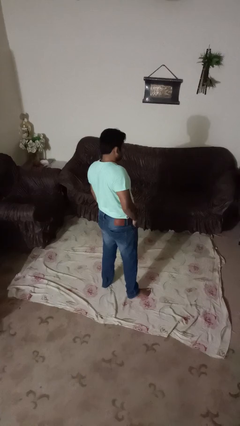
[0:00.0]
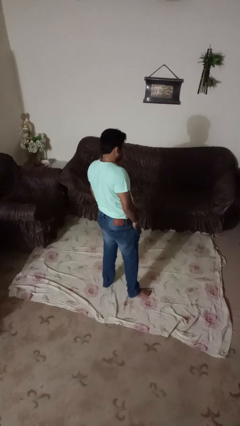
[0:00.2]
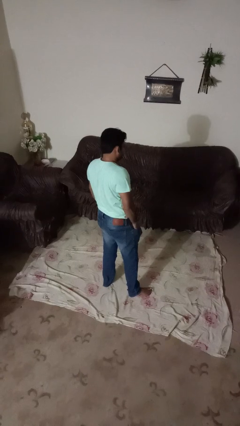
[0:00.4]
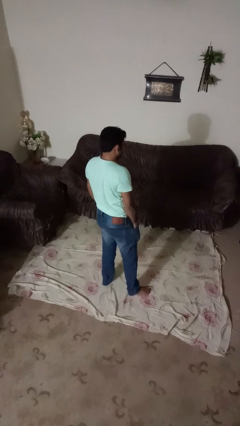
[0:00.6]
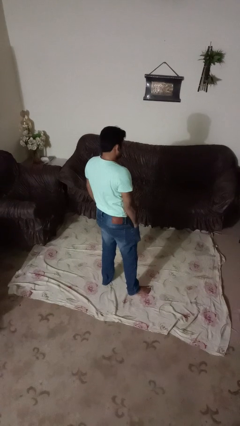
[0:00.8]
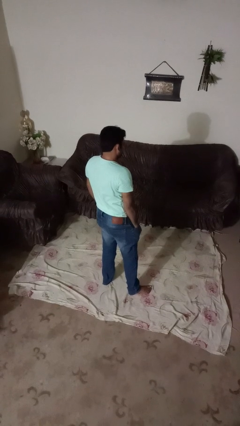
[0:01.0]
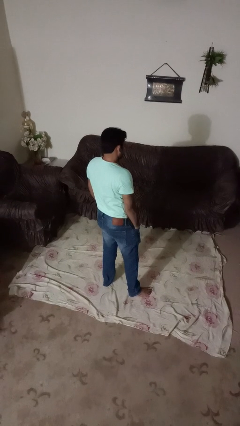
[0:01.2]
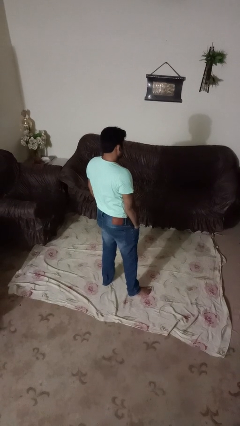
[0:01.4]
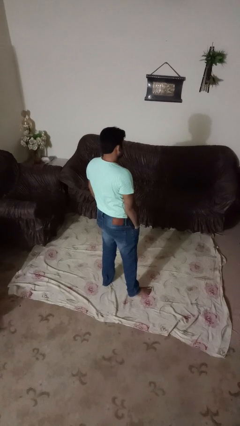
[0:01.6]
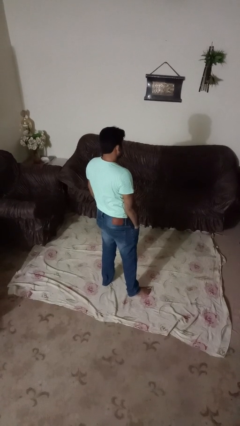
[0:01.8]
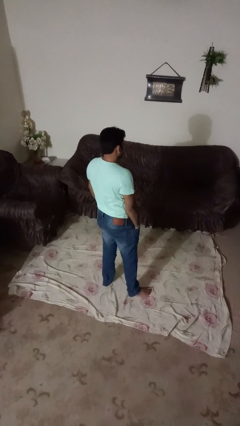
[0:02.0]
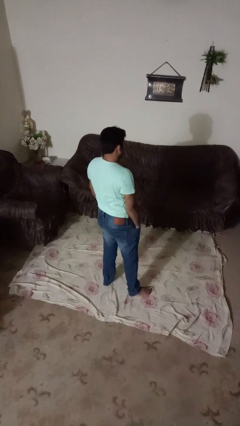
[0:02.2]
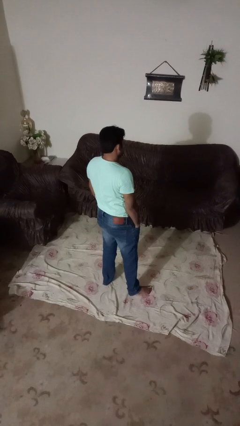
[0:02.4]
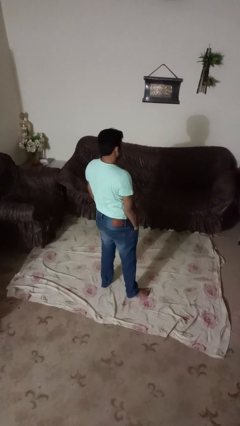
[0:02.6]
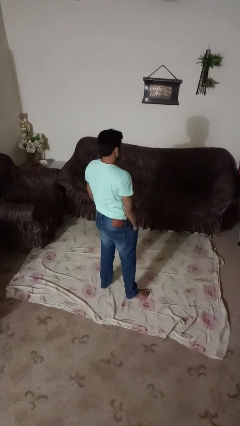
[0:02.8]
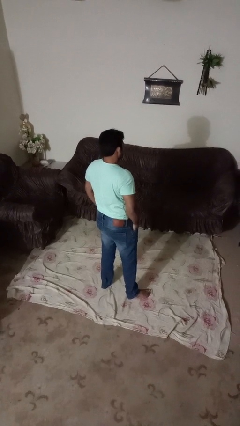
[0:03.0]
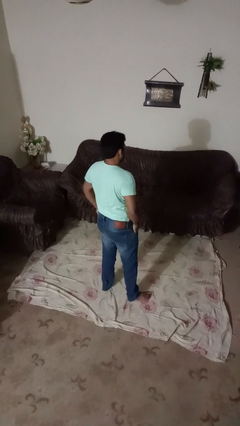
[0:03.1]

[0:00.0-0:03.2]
person puts hands in back pockets

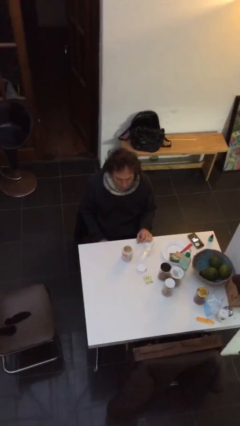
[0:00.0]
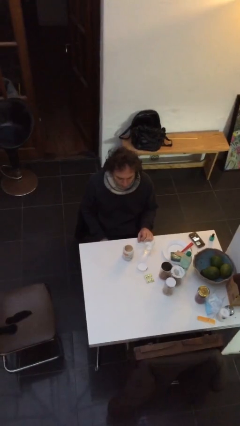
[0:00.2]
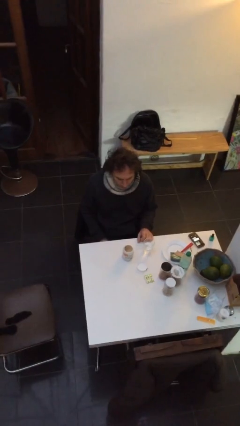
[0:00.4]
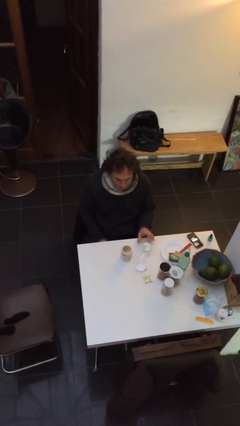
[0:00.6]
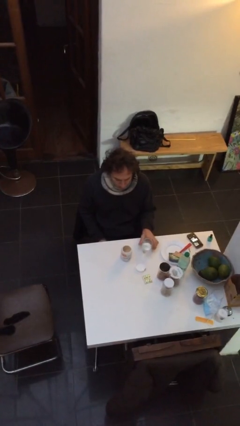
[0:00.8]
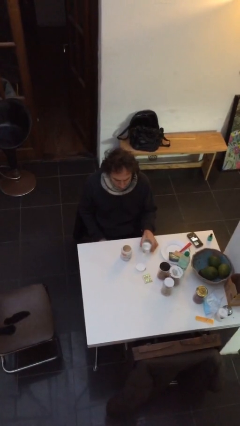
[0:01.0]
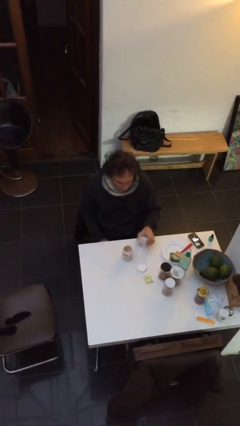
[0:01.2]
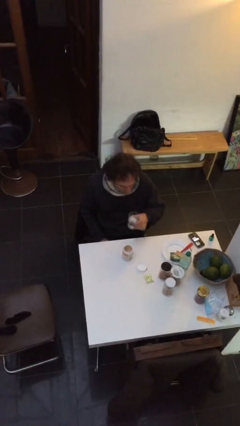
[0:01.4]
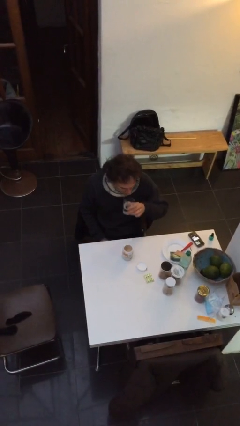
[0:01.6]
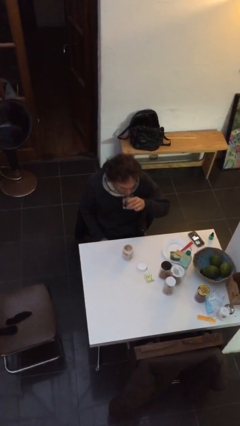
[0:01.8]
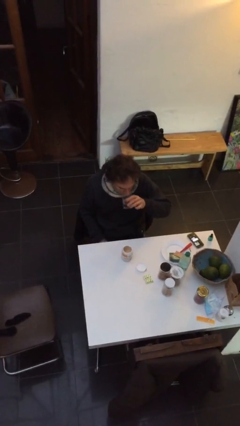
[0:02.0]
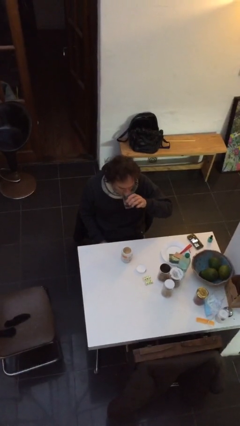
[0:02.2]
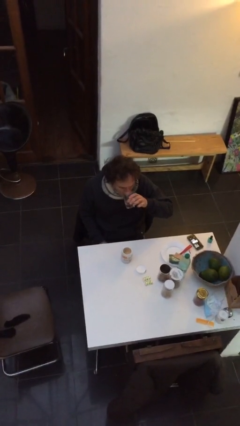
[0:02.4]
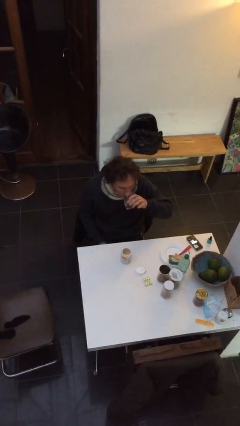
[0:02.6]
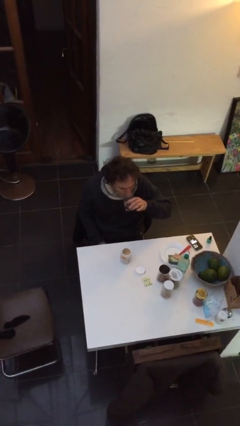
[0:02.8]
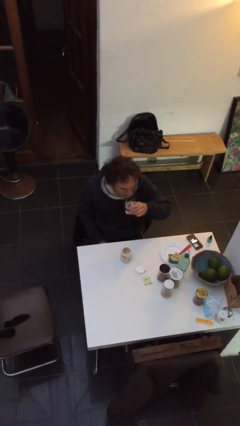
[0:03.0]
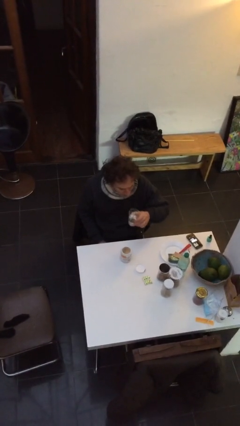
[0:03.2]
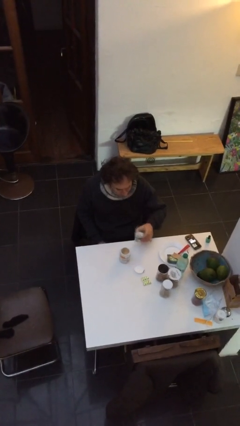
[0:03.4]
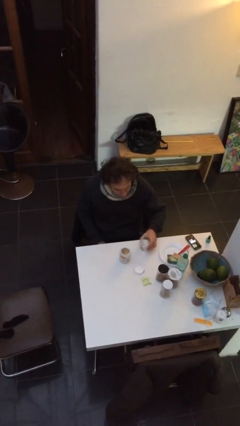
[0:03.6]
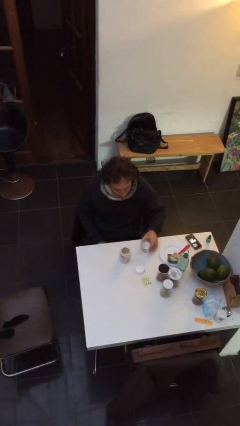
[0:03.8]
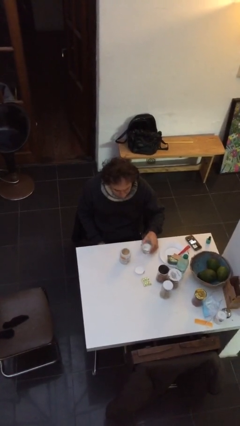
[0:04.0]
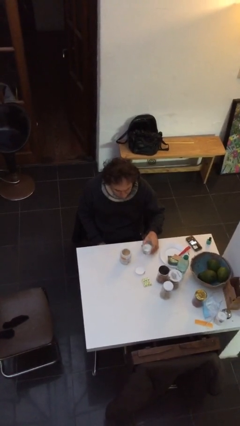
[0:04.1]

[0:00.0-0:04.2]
person drinks from cup

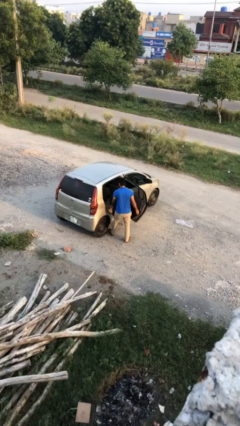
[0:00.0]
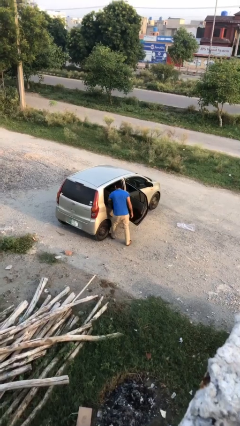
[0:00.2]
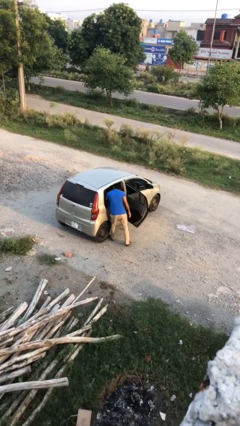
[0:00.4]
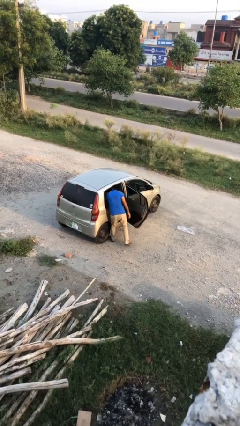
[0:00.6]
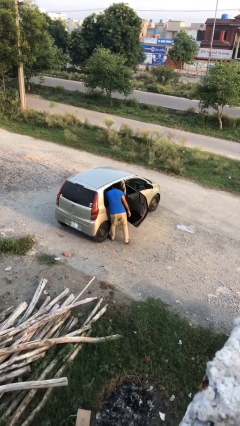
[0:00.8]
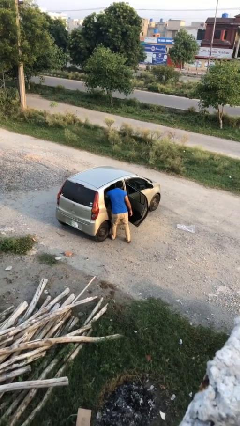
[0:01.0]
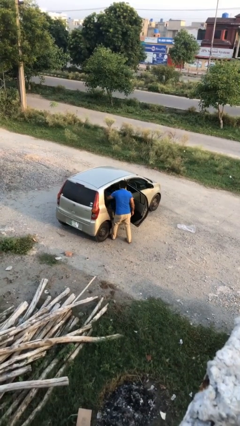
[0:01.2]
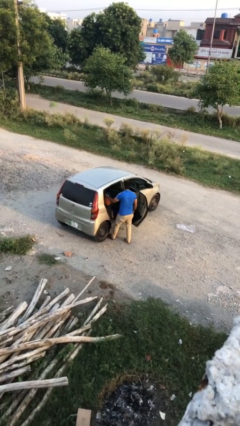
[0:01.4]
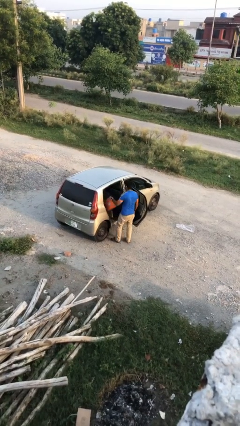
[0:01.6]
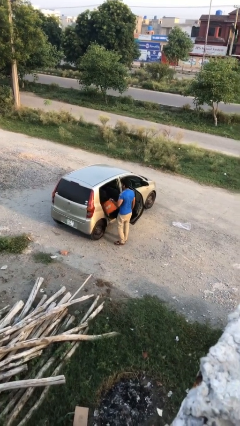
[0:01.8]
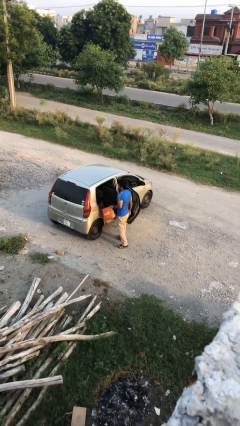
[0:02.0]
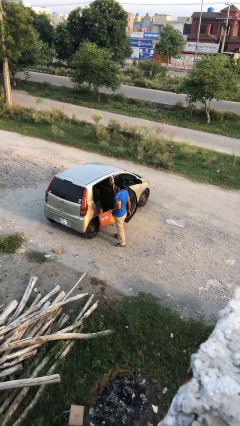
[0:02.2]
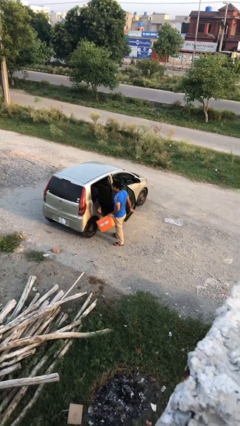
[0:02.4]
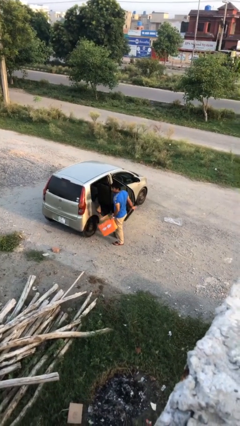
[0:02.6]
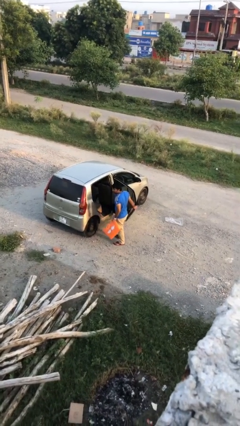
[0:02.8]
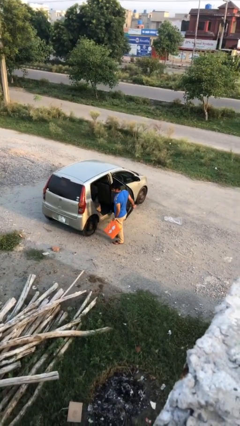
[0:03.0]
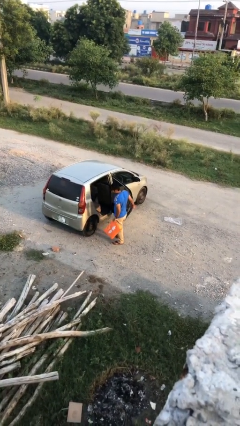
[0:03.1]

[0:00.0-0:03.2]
person unloads car

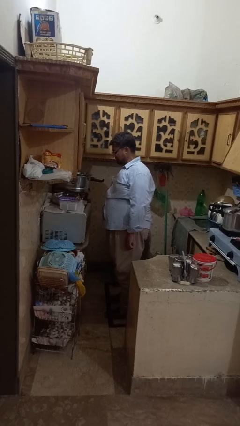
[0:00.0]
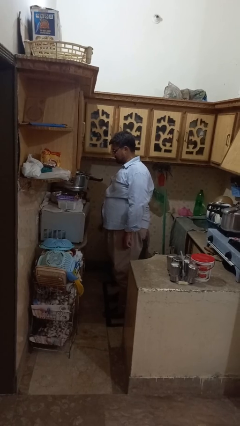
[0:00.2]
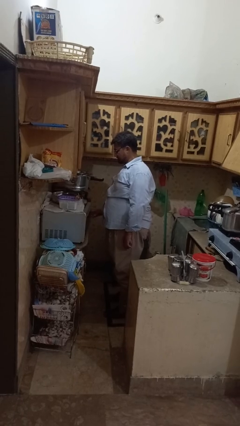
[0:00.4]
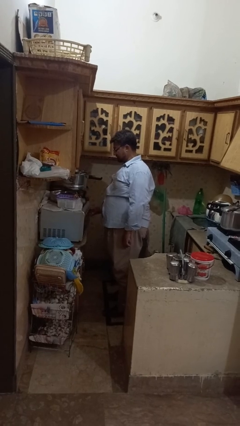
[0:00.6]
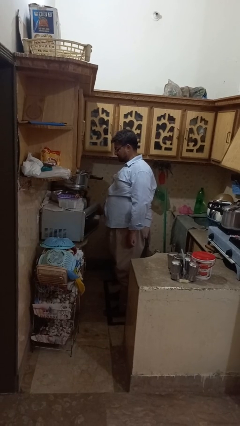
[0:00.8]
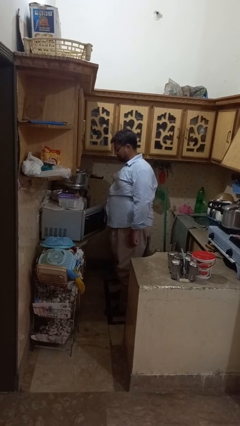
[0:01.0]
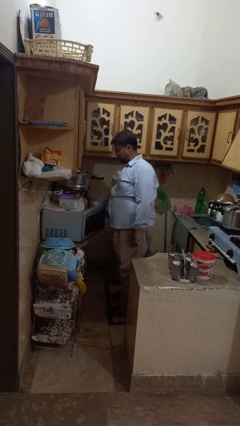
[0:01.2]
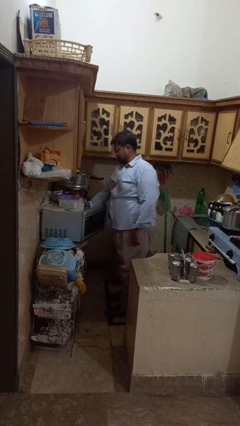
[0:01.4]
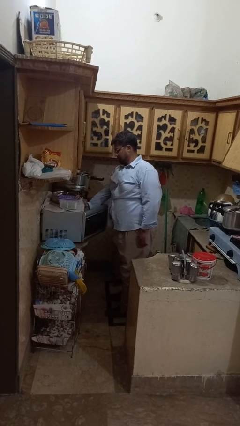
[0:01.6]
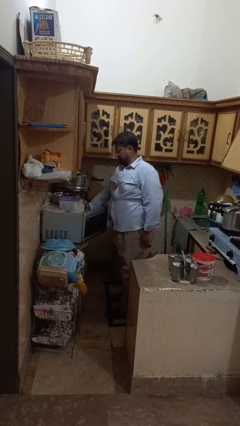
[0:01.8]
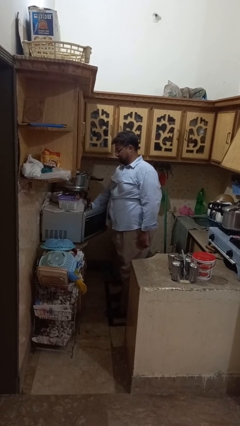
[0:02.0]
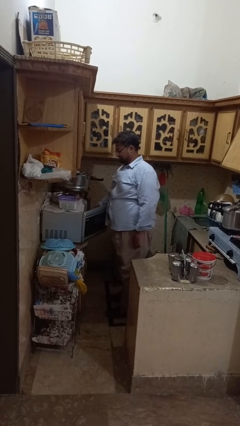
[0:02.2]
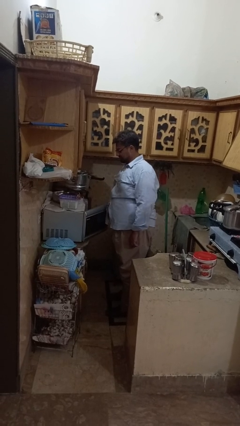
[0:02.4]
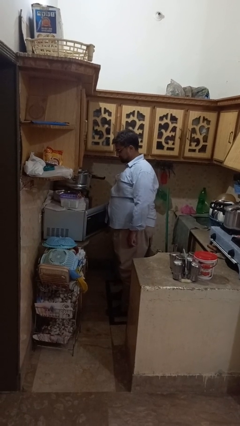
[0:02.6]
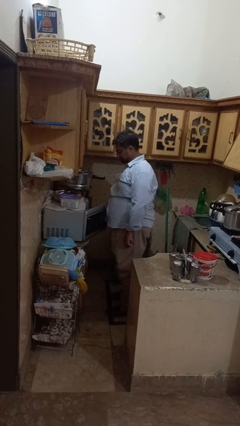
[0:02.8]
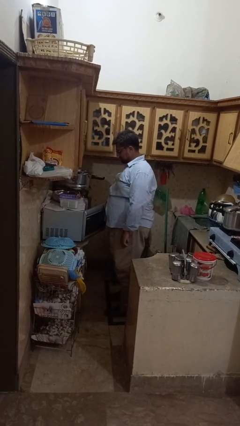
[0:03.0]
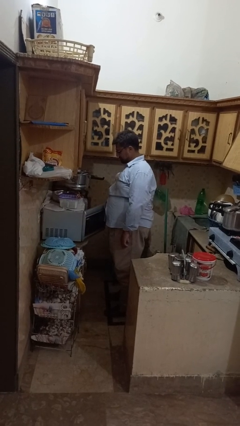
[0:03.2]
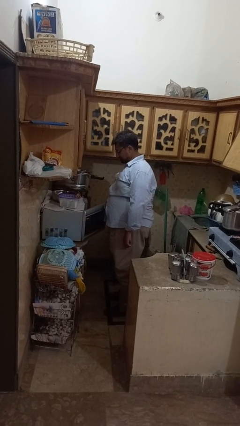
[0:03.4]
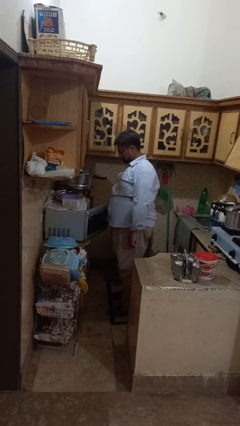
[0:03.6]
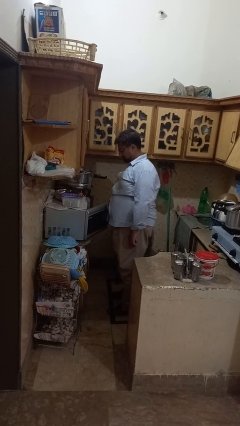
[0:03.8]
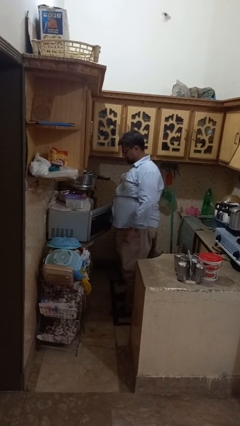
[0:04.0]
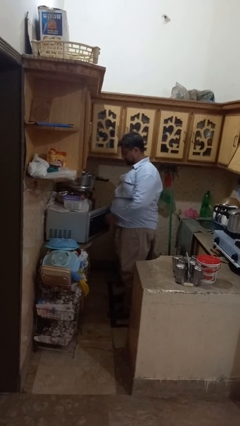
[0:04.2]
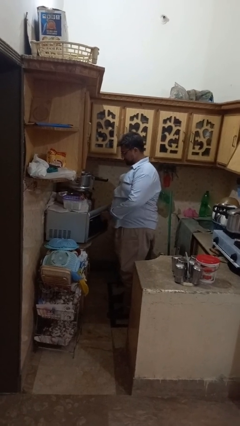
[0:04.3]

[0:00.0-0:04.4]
person takes object from microwave

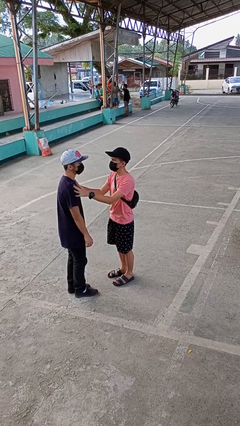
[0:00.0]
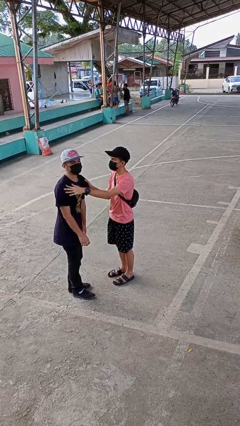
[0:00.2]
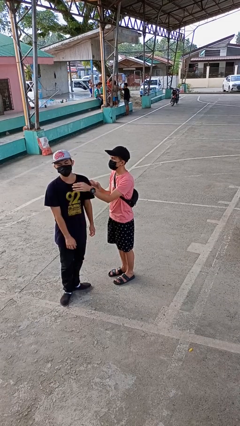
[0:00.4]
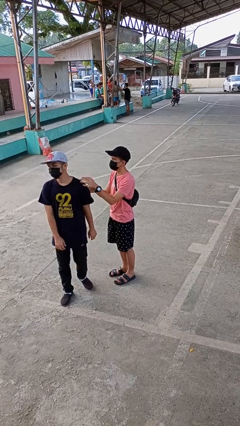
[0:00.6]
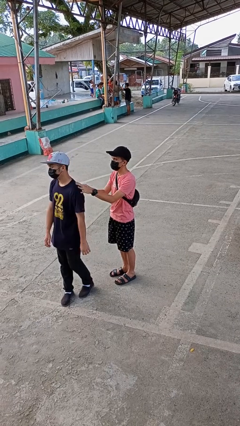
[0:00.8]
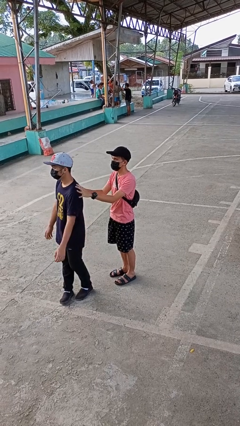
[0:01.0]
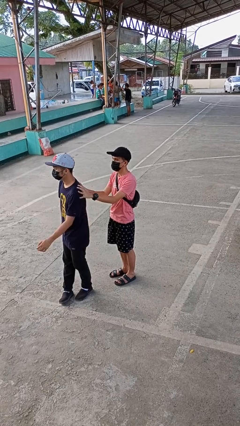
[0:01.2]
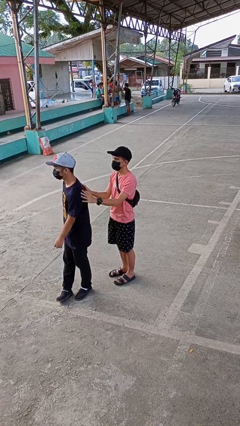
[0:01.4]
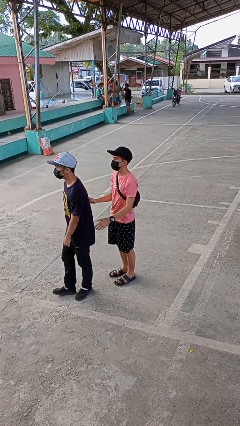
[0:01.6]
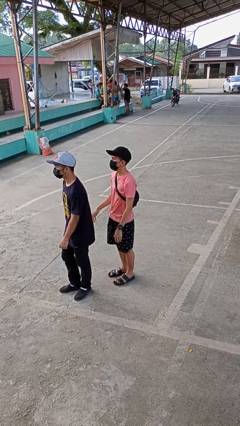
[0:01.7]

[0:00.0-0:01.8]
person spins person around

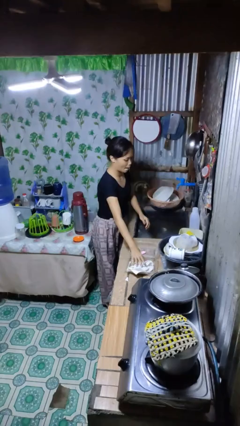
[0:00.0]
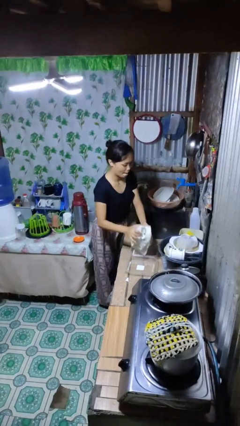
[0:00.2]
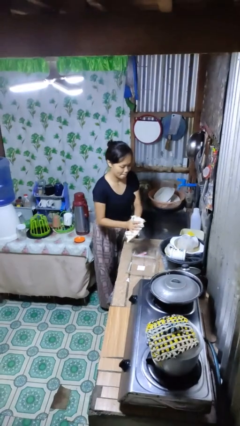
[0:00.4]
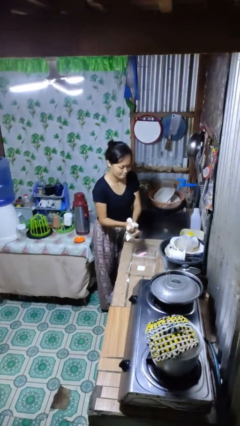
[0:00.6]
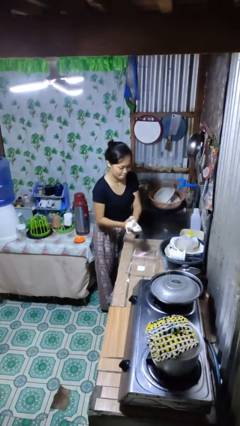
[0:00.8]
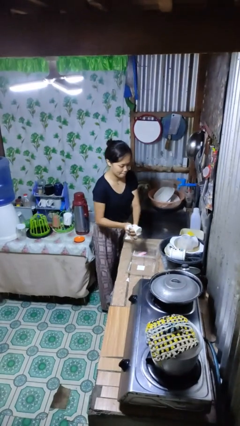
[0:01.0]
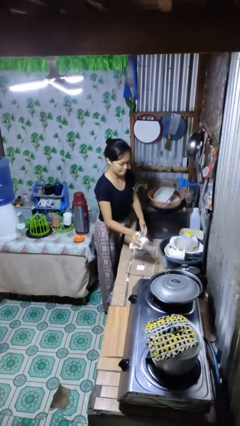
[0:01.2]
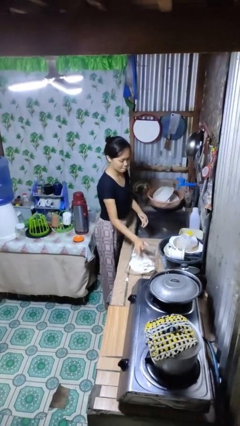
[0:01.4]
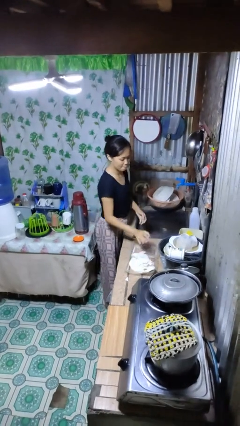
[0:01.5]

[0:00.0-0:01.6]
person dries hands with towel
